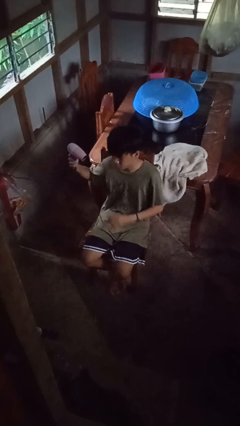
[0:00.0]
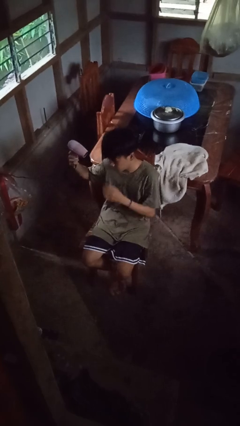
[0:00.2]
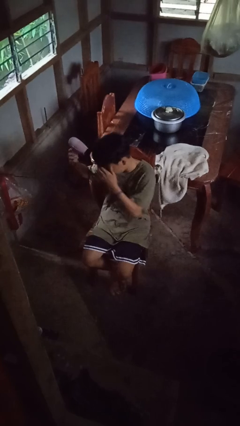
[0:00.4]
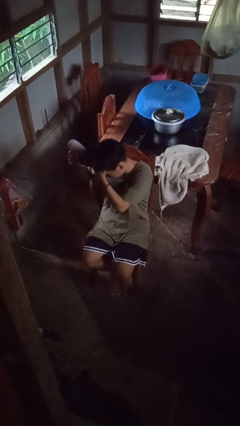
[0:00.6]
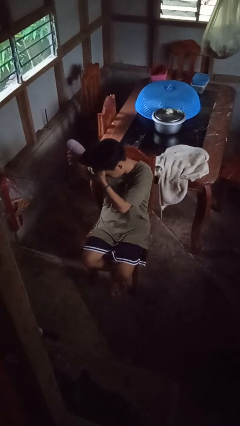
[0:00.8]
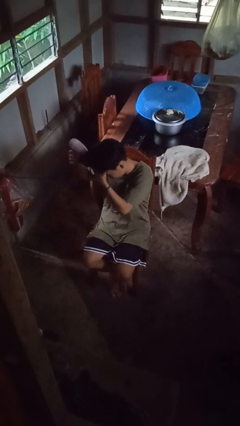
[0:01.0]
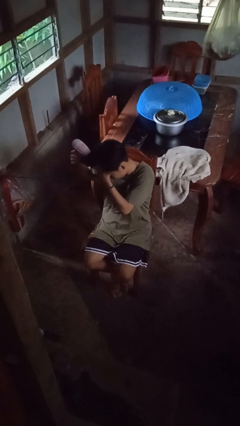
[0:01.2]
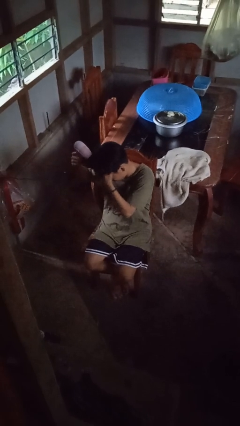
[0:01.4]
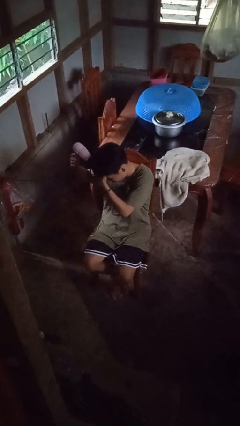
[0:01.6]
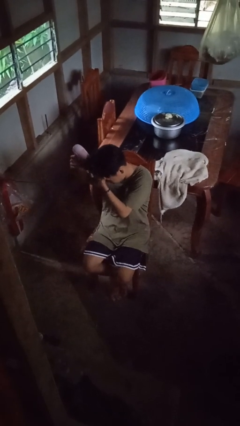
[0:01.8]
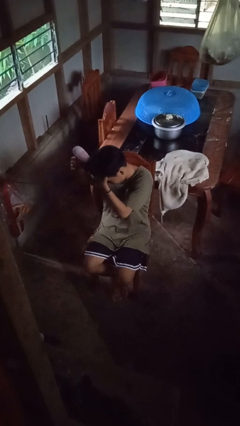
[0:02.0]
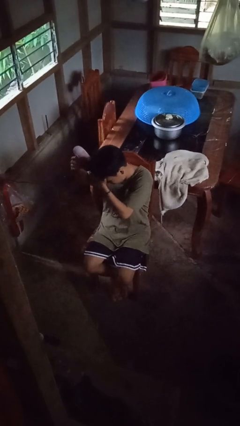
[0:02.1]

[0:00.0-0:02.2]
person dries hair with hairdryer

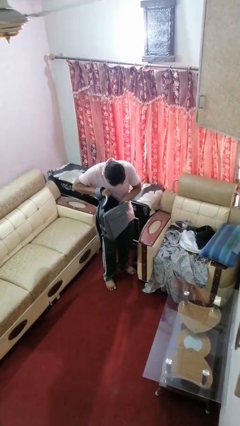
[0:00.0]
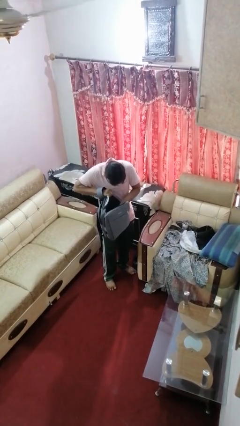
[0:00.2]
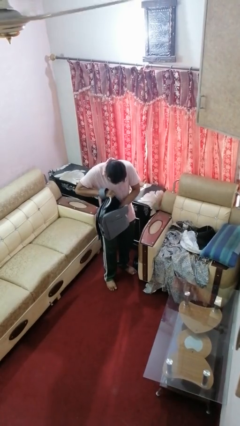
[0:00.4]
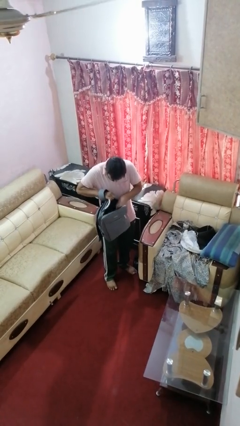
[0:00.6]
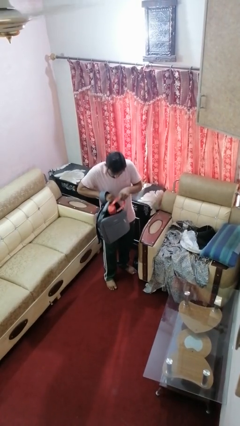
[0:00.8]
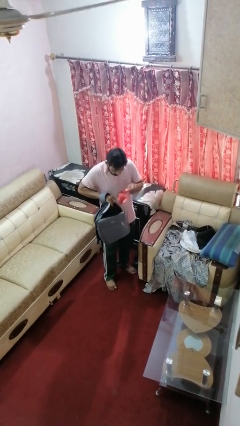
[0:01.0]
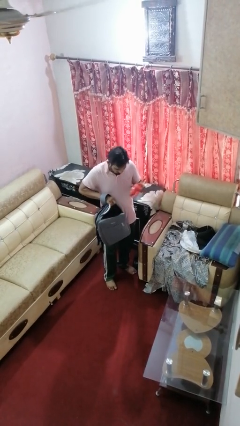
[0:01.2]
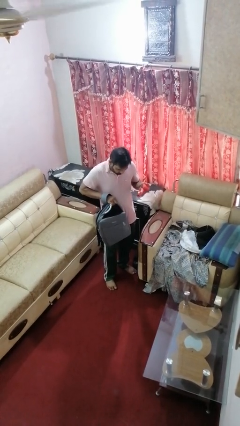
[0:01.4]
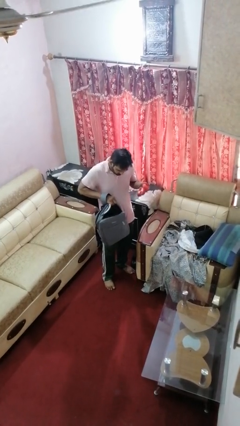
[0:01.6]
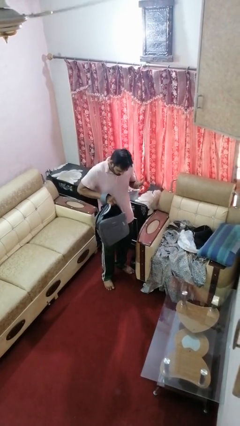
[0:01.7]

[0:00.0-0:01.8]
person takes object from backpack

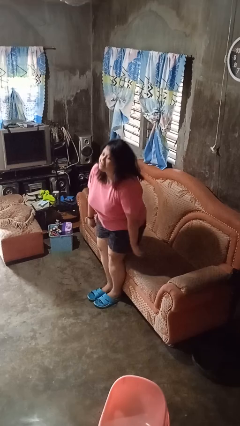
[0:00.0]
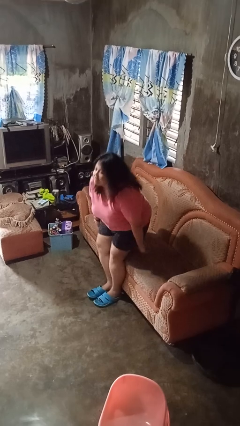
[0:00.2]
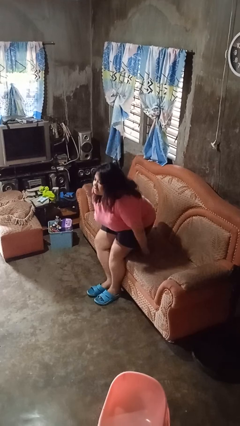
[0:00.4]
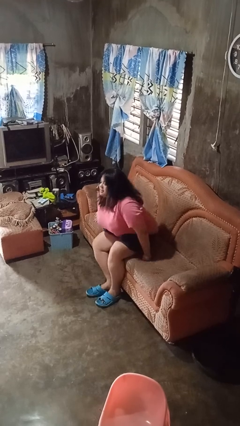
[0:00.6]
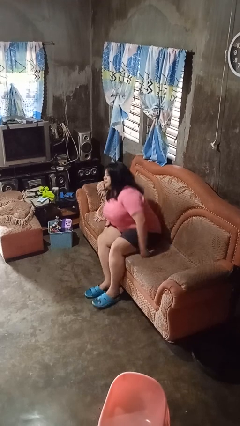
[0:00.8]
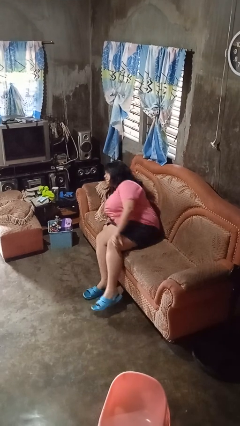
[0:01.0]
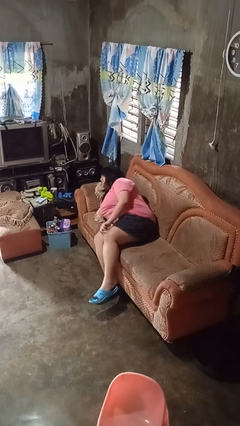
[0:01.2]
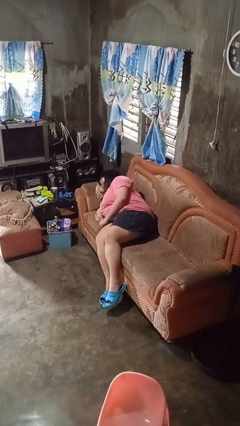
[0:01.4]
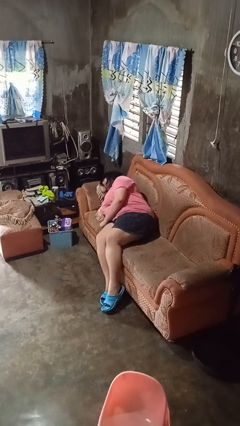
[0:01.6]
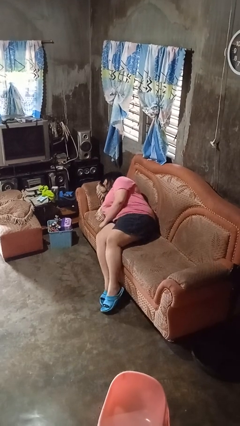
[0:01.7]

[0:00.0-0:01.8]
person lies down on couch

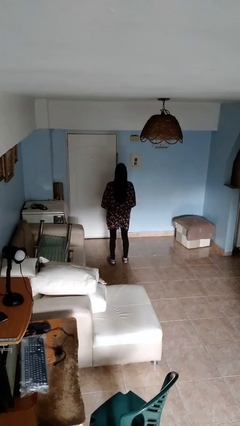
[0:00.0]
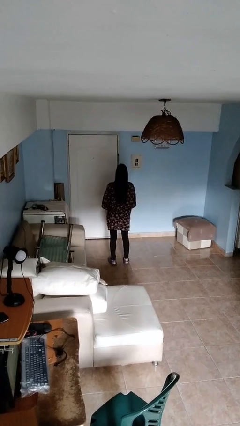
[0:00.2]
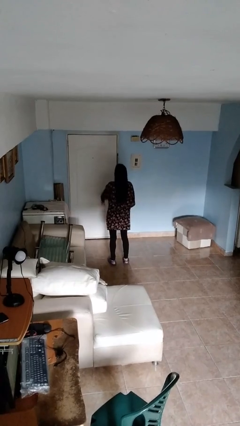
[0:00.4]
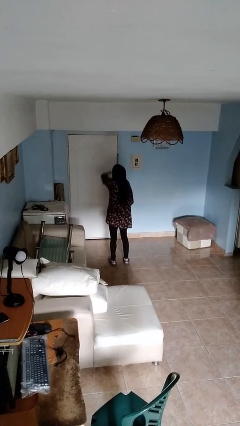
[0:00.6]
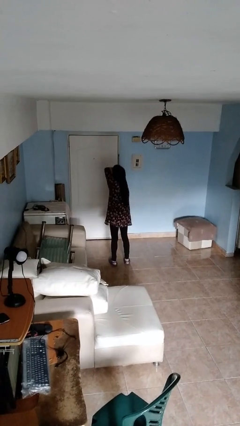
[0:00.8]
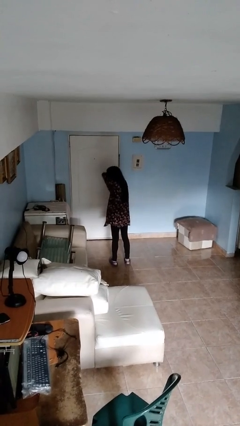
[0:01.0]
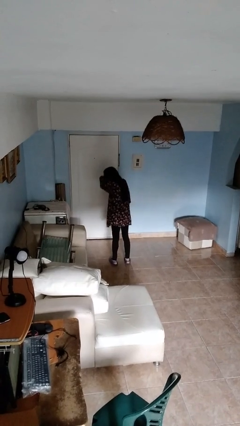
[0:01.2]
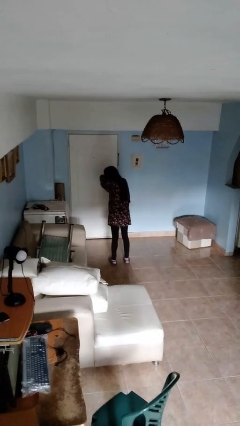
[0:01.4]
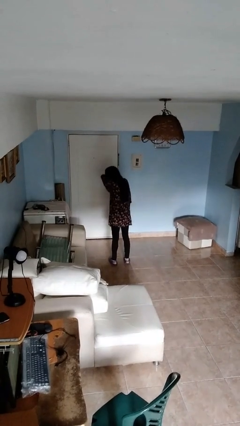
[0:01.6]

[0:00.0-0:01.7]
person sneezes into arm

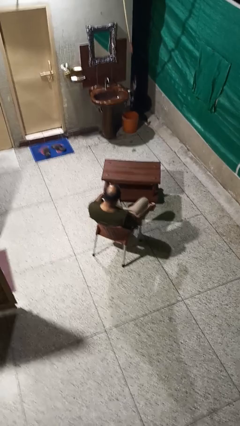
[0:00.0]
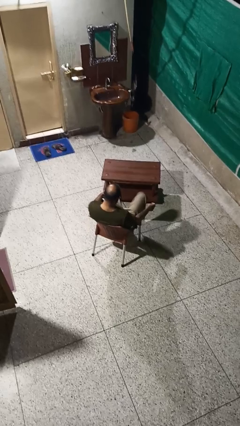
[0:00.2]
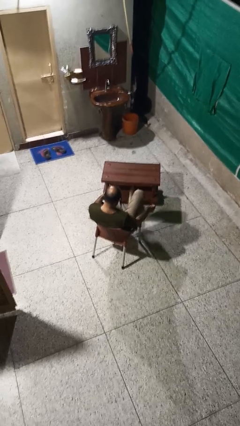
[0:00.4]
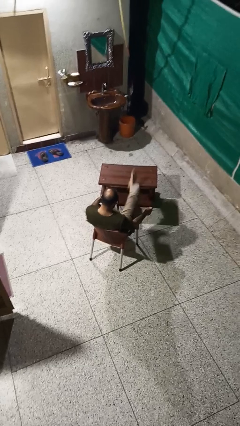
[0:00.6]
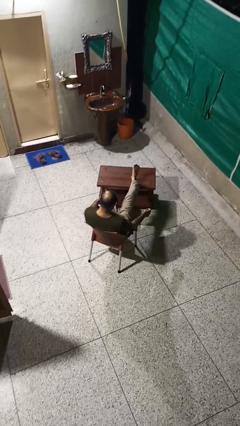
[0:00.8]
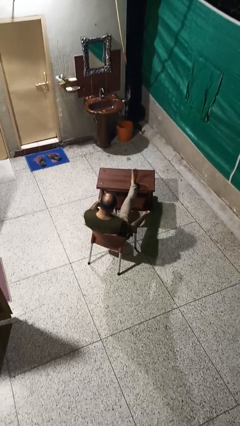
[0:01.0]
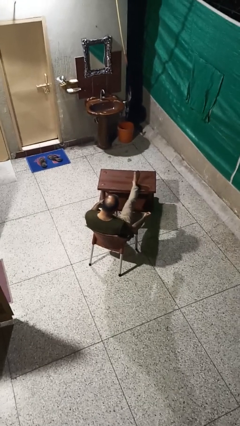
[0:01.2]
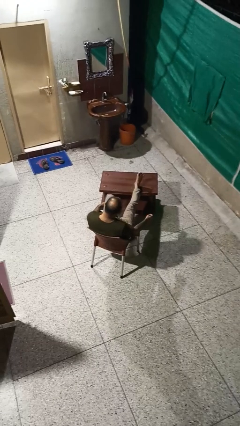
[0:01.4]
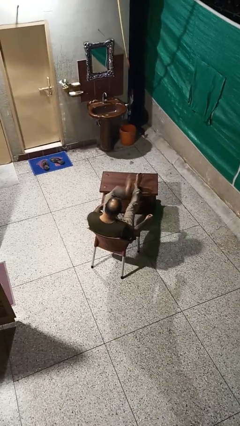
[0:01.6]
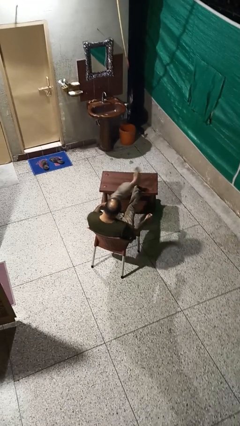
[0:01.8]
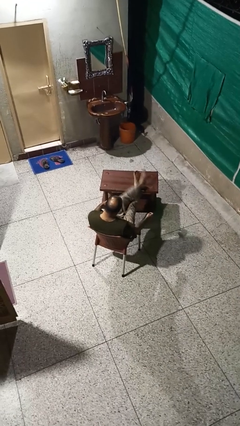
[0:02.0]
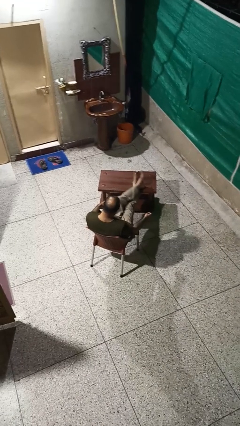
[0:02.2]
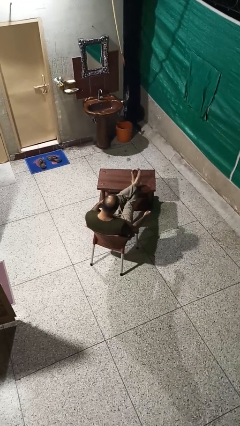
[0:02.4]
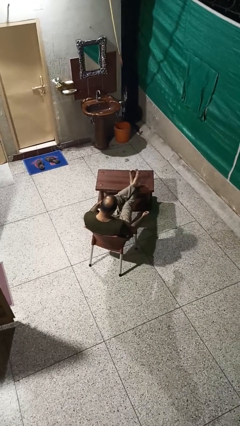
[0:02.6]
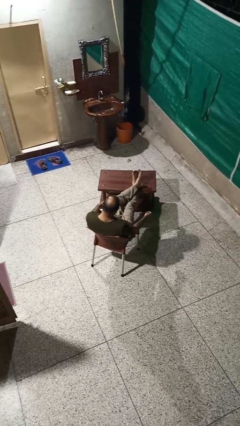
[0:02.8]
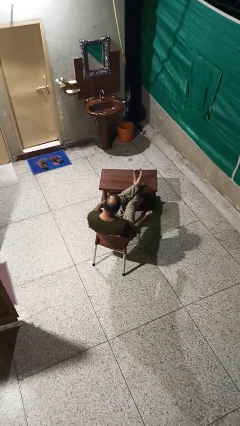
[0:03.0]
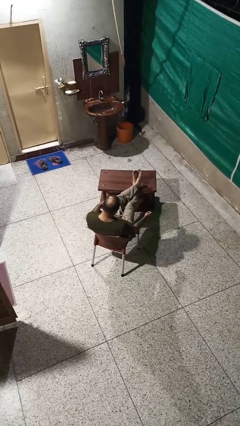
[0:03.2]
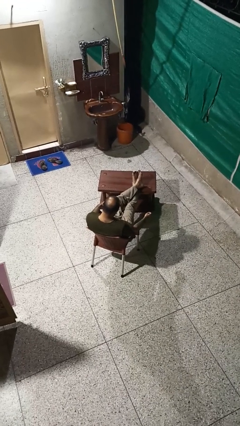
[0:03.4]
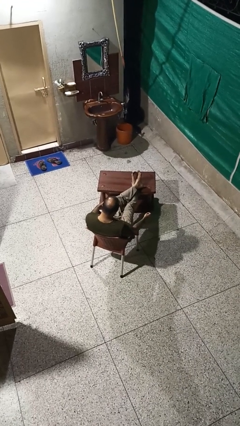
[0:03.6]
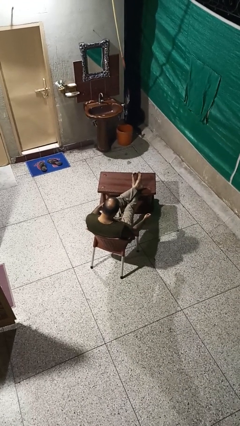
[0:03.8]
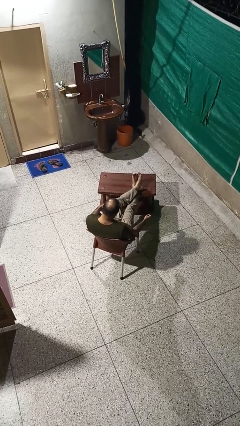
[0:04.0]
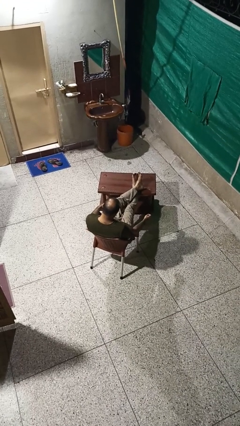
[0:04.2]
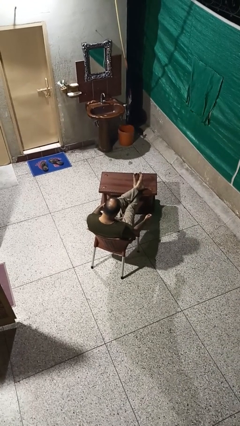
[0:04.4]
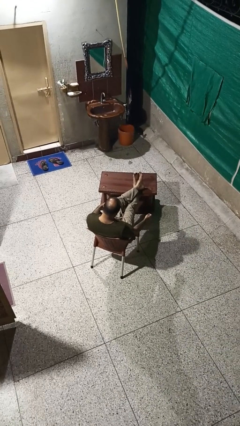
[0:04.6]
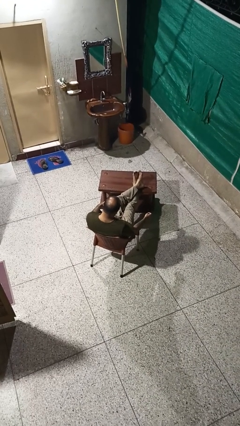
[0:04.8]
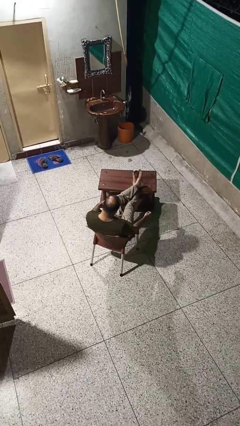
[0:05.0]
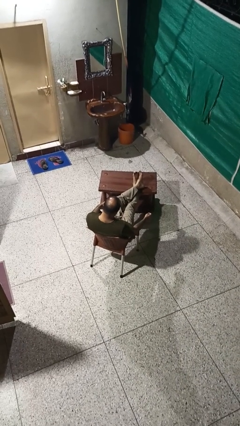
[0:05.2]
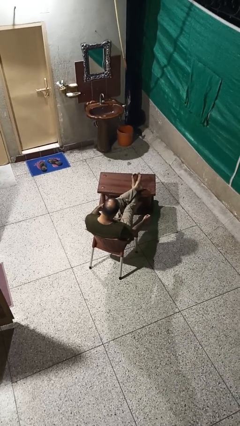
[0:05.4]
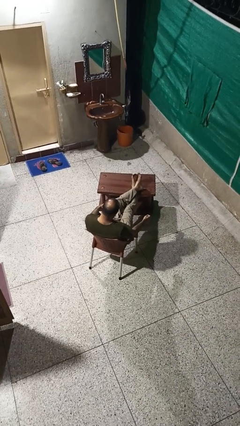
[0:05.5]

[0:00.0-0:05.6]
person puts feet up

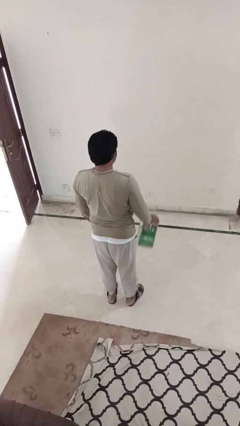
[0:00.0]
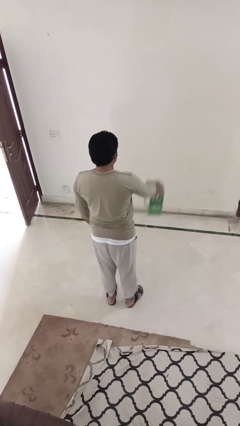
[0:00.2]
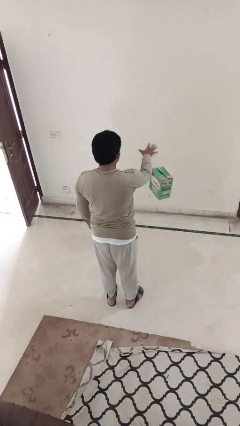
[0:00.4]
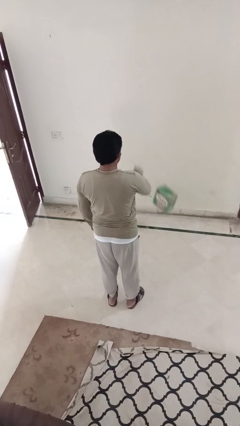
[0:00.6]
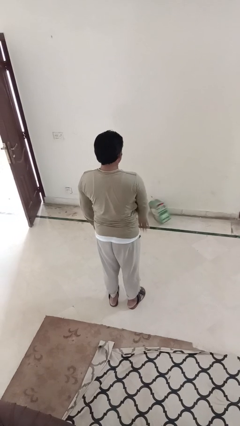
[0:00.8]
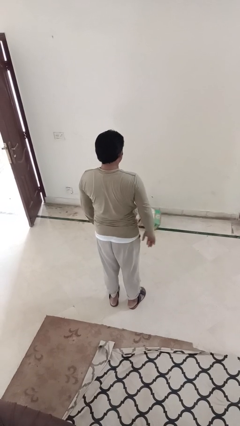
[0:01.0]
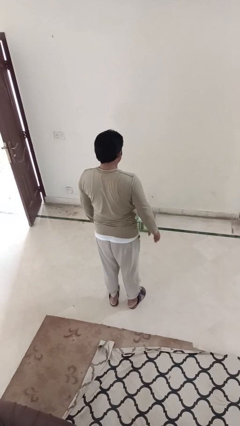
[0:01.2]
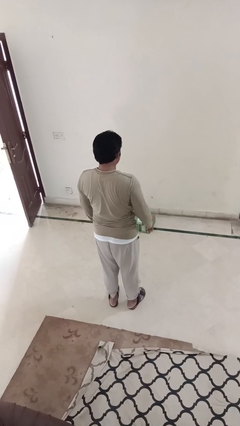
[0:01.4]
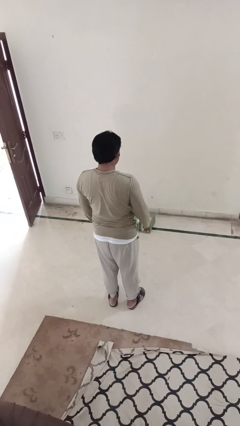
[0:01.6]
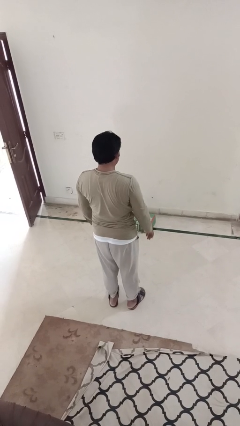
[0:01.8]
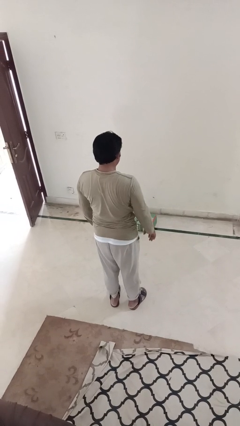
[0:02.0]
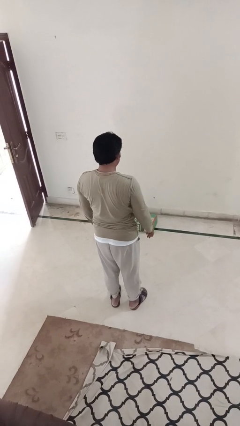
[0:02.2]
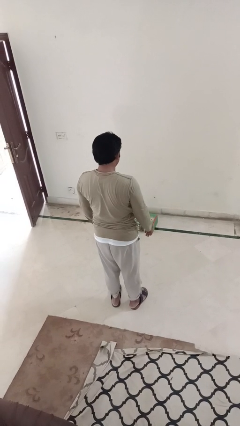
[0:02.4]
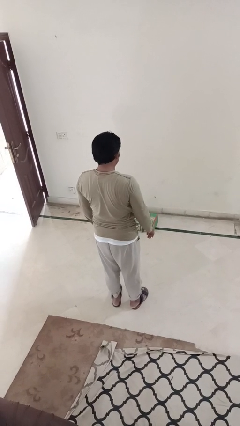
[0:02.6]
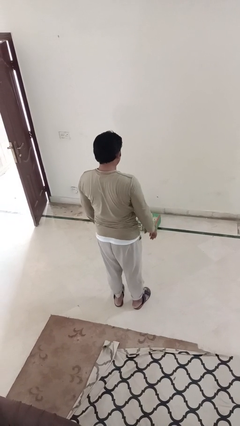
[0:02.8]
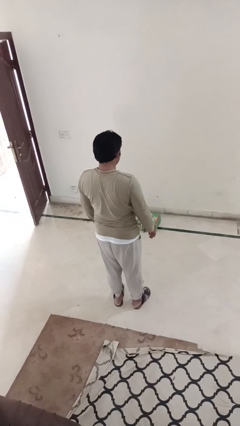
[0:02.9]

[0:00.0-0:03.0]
person throws object to ground

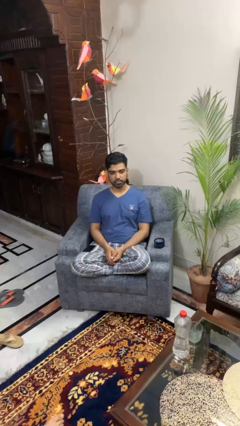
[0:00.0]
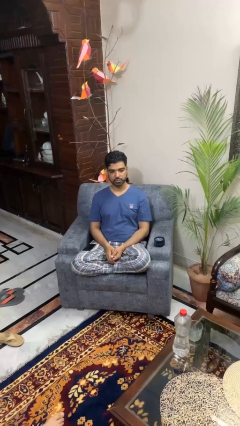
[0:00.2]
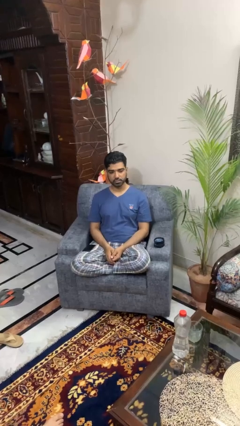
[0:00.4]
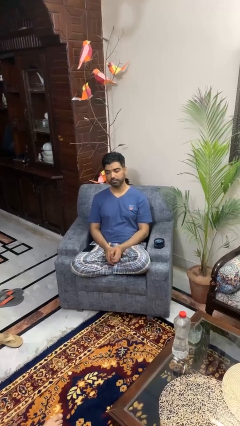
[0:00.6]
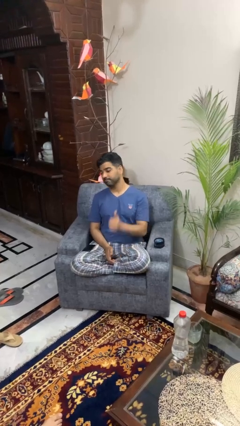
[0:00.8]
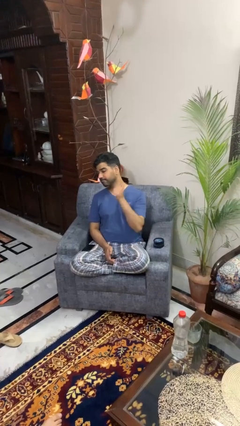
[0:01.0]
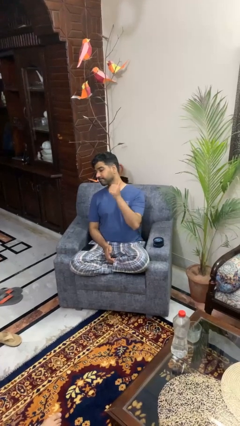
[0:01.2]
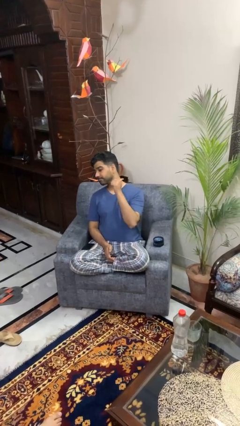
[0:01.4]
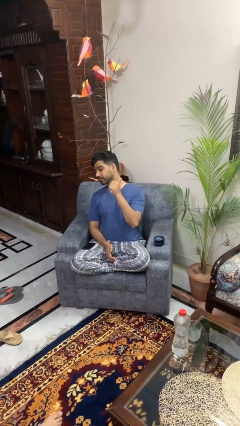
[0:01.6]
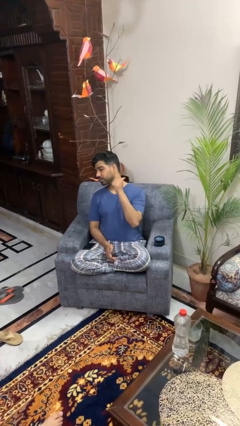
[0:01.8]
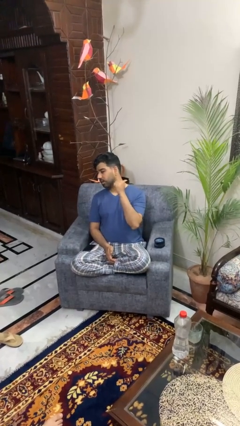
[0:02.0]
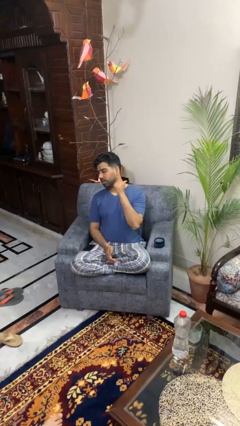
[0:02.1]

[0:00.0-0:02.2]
person gestures behind me
